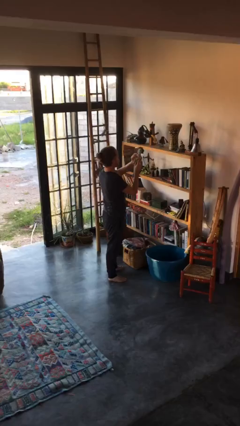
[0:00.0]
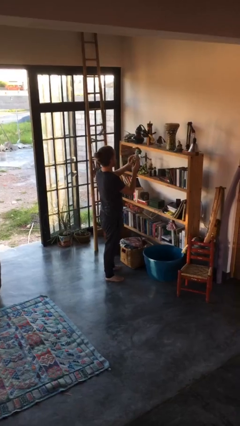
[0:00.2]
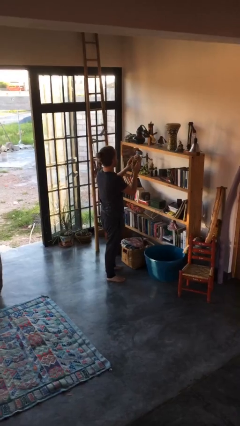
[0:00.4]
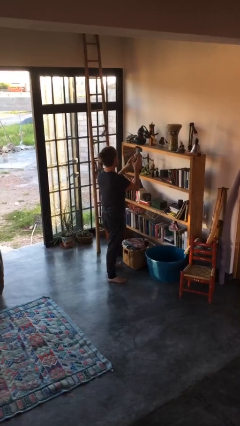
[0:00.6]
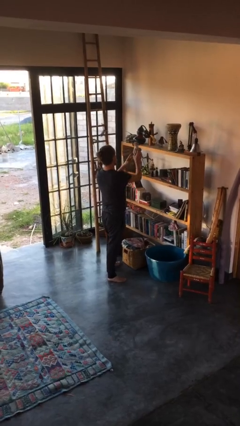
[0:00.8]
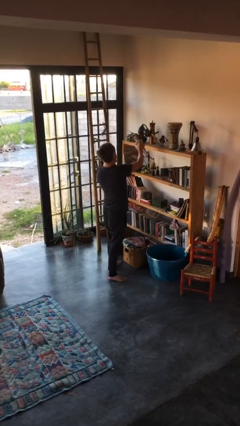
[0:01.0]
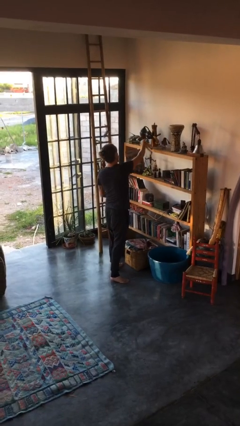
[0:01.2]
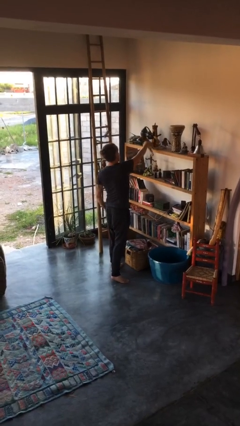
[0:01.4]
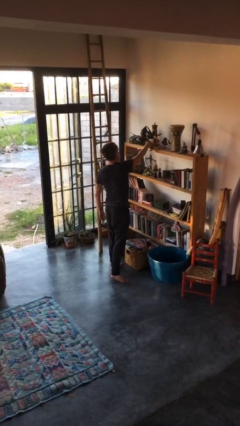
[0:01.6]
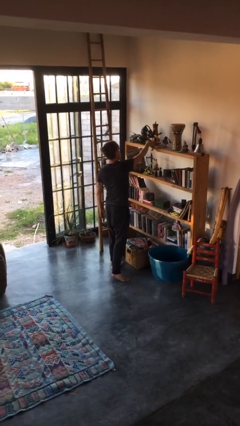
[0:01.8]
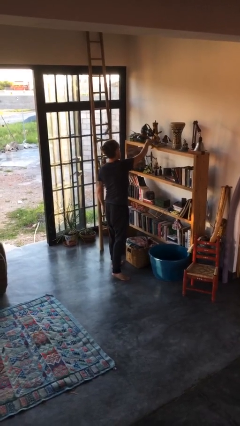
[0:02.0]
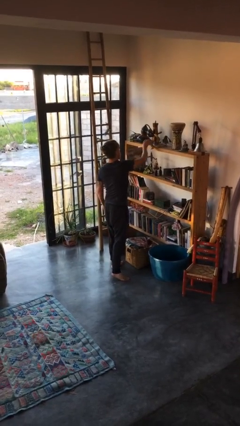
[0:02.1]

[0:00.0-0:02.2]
person puts down object on countertop

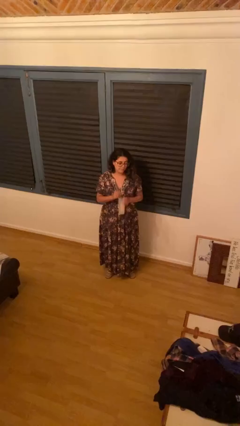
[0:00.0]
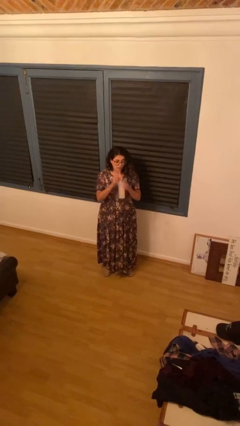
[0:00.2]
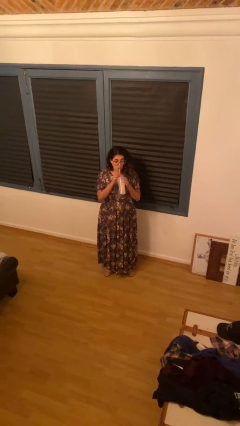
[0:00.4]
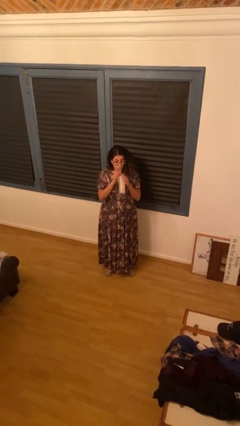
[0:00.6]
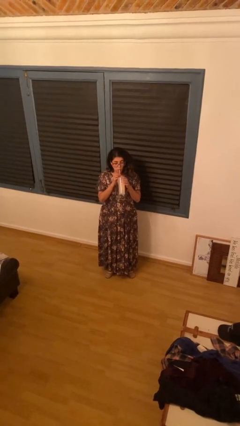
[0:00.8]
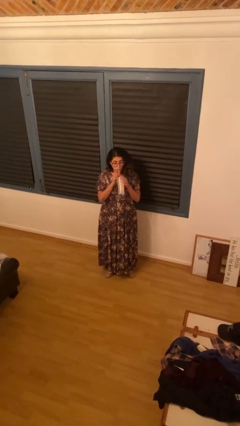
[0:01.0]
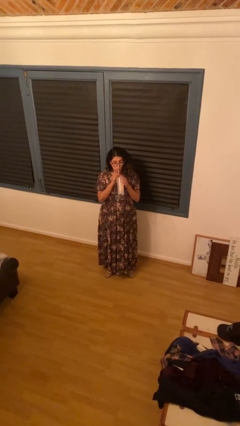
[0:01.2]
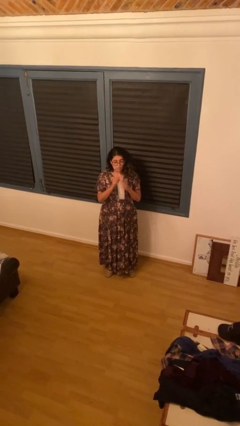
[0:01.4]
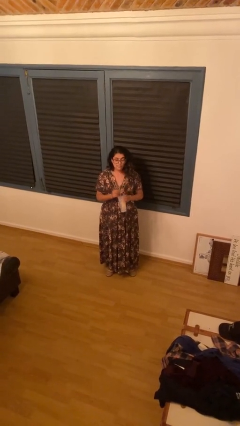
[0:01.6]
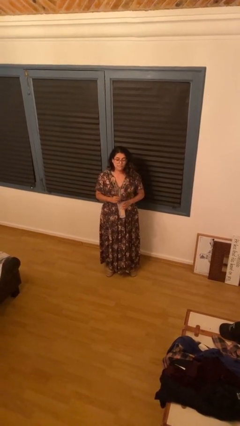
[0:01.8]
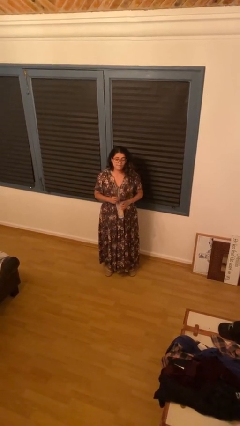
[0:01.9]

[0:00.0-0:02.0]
person drinks from straw

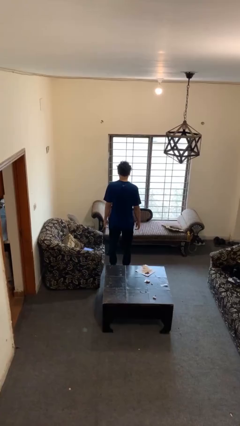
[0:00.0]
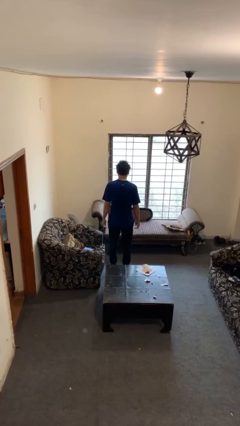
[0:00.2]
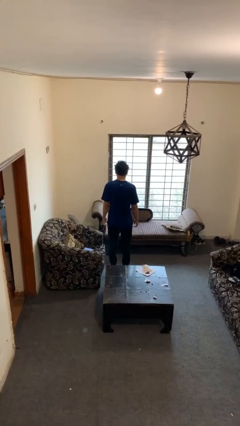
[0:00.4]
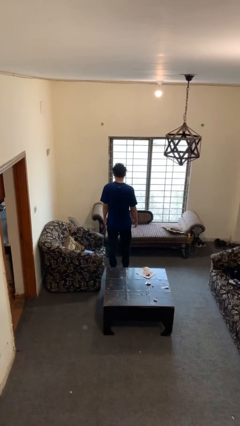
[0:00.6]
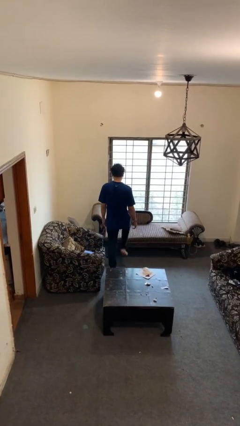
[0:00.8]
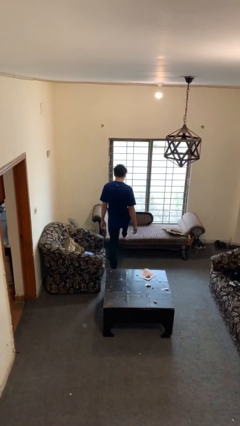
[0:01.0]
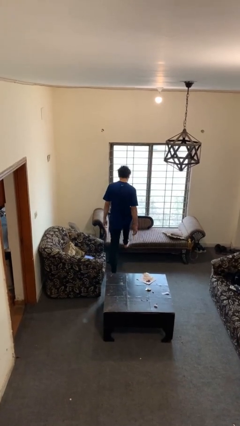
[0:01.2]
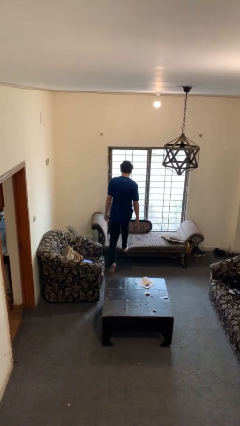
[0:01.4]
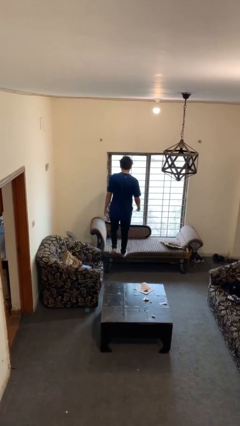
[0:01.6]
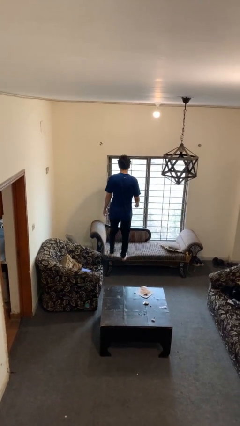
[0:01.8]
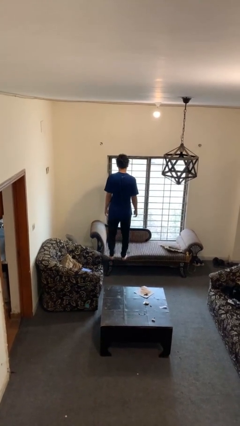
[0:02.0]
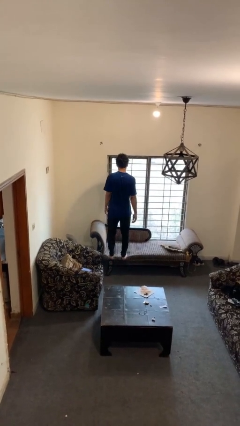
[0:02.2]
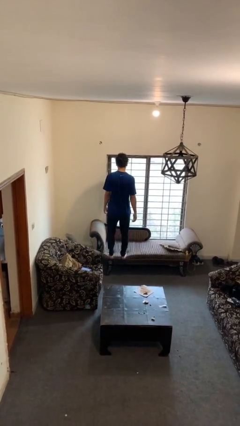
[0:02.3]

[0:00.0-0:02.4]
person climbs on couch

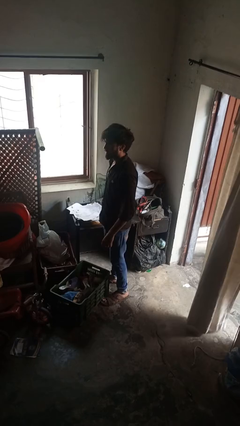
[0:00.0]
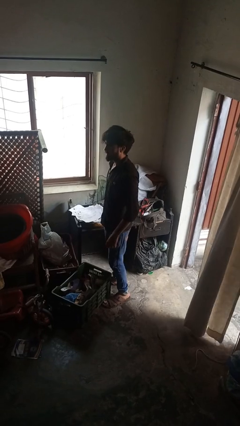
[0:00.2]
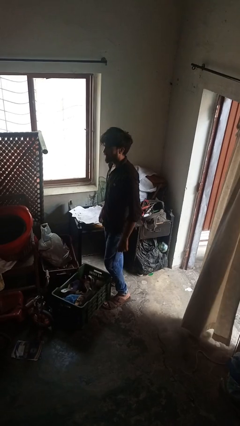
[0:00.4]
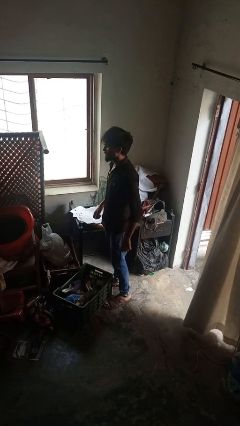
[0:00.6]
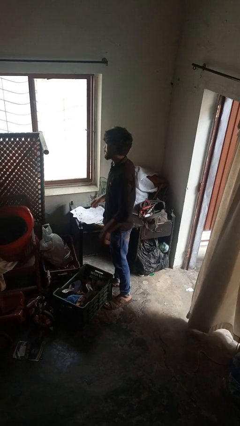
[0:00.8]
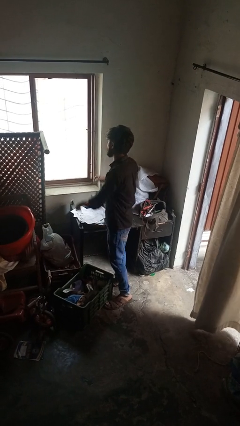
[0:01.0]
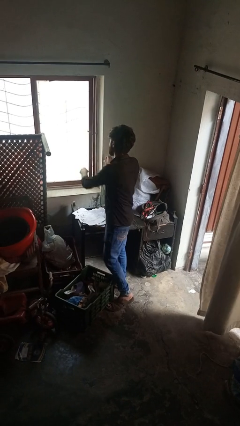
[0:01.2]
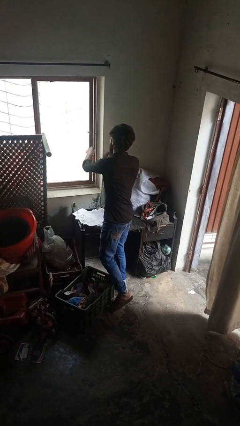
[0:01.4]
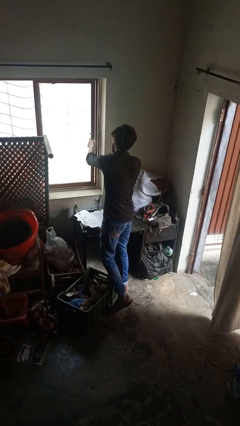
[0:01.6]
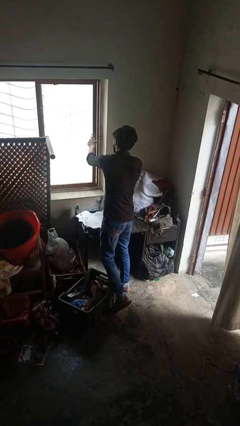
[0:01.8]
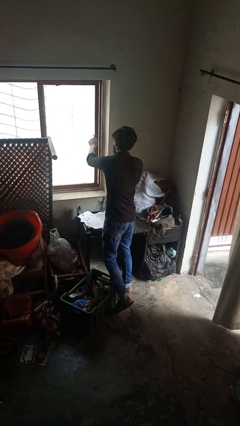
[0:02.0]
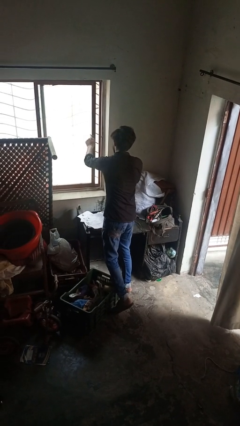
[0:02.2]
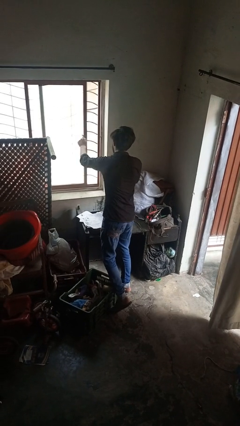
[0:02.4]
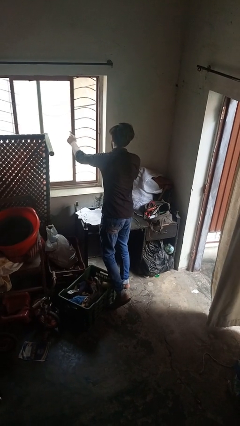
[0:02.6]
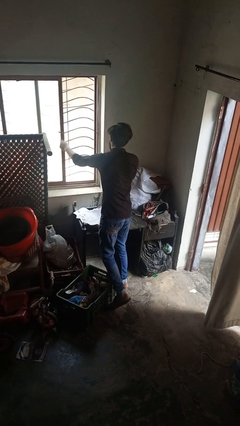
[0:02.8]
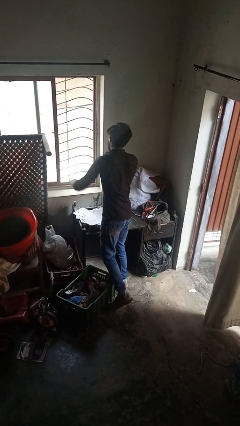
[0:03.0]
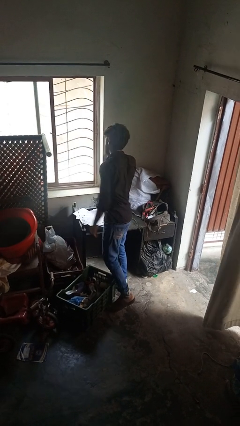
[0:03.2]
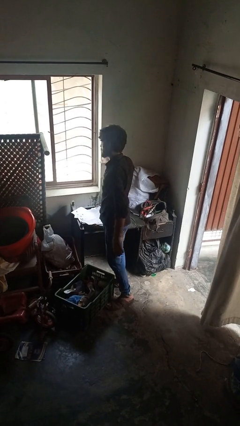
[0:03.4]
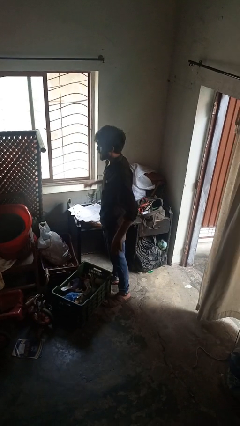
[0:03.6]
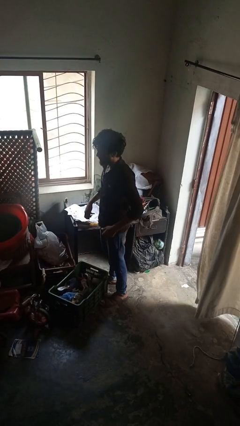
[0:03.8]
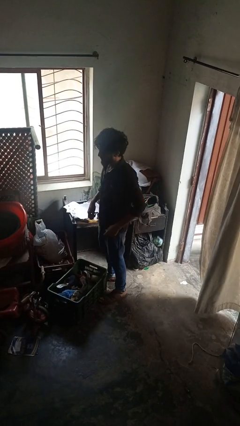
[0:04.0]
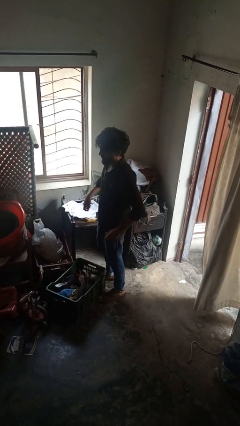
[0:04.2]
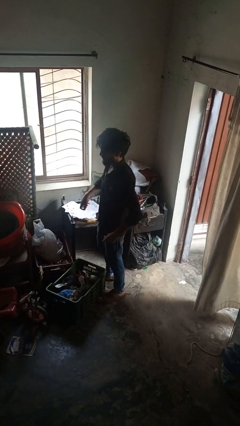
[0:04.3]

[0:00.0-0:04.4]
person opens home window

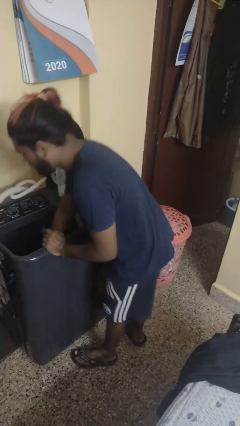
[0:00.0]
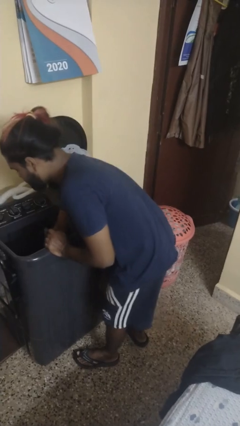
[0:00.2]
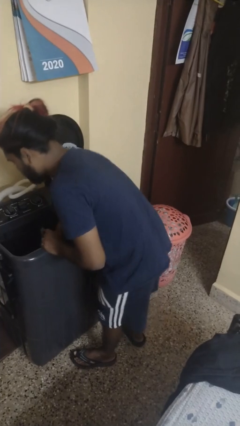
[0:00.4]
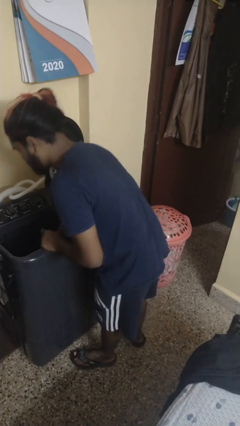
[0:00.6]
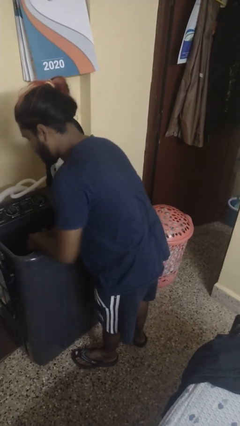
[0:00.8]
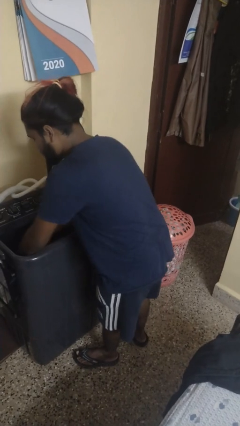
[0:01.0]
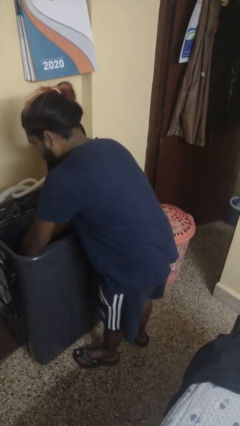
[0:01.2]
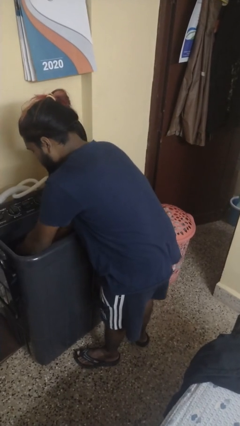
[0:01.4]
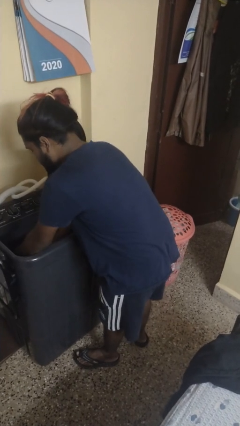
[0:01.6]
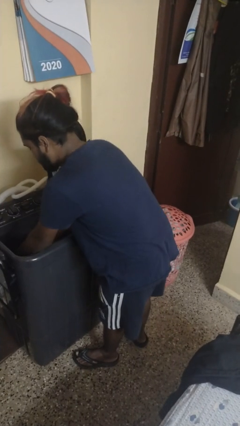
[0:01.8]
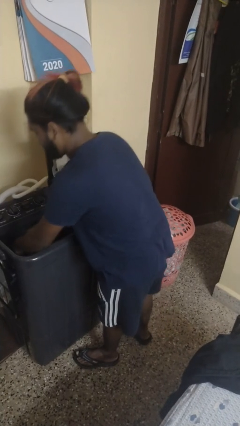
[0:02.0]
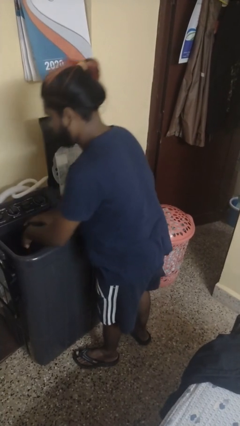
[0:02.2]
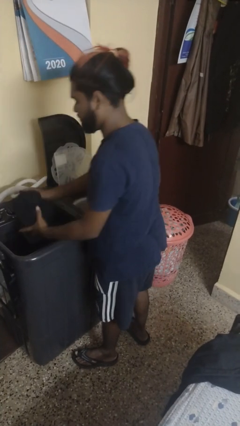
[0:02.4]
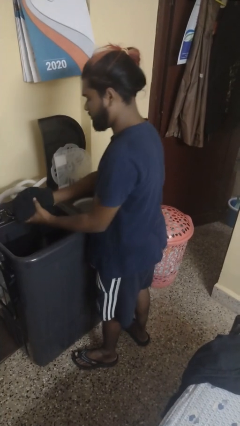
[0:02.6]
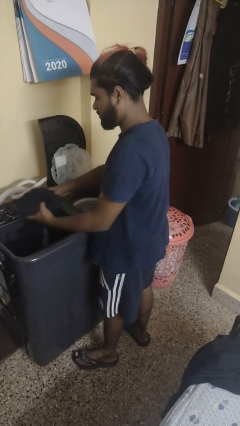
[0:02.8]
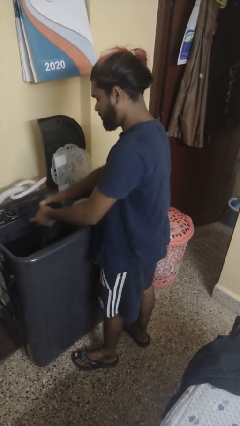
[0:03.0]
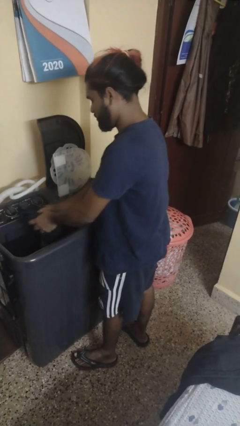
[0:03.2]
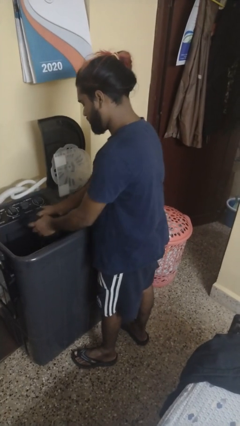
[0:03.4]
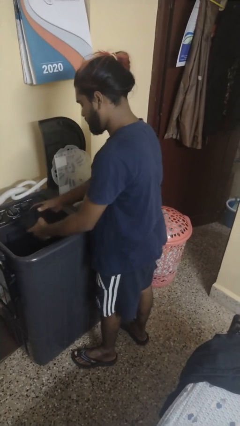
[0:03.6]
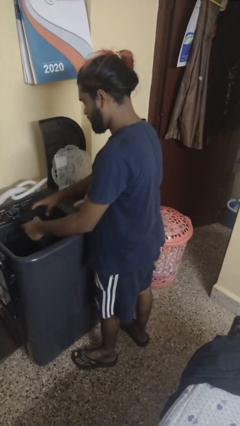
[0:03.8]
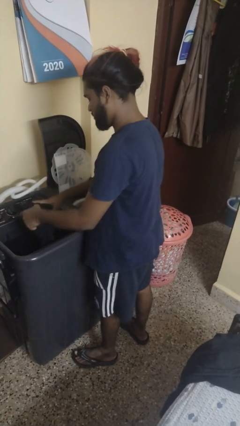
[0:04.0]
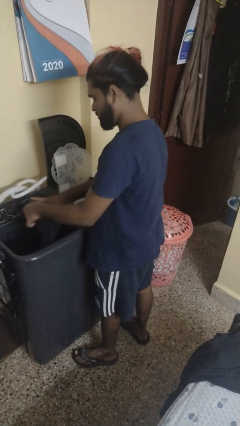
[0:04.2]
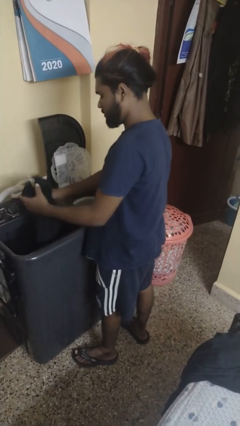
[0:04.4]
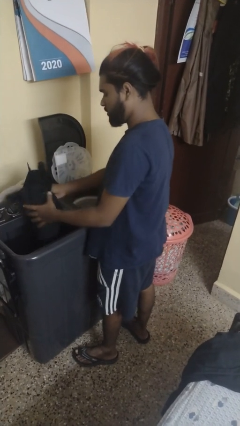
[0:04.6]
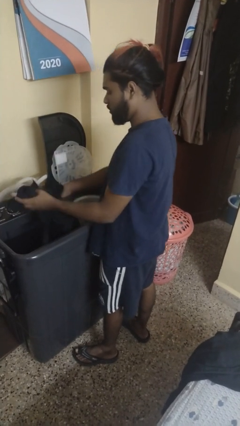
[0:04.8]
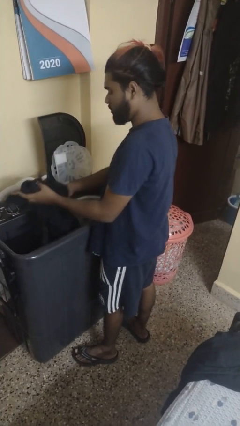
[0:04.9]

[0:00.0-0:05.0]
person unloads clotheswasher

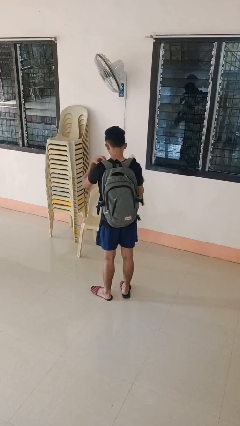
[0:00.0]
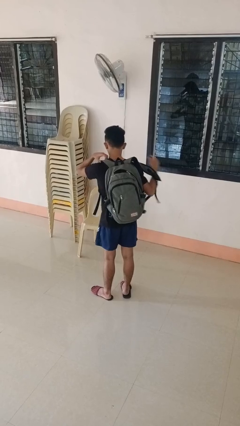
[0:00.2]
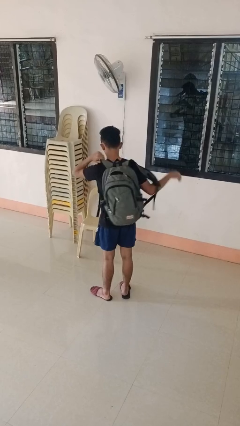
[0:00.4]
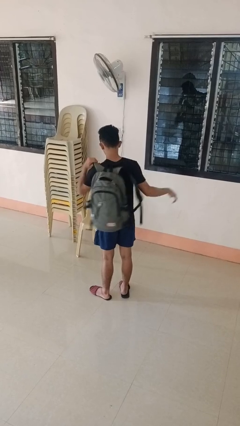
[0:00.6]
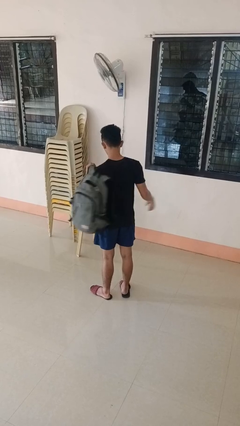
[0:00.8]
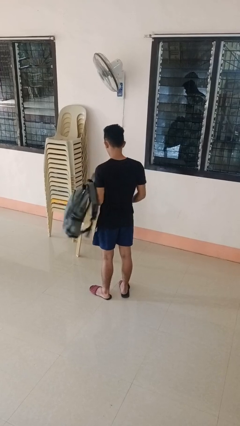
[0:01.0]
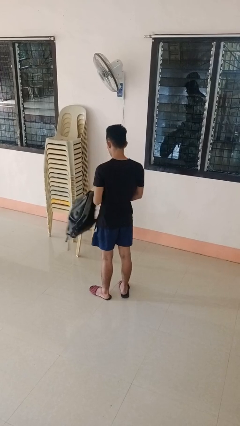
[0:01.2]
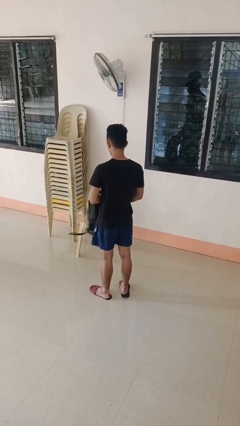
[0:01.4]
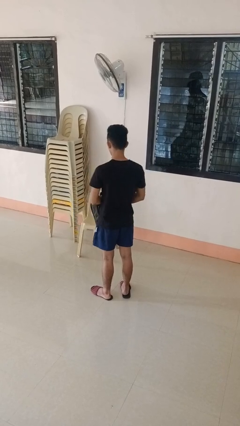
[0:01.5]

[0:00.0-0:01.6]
person takes off backpack
